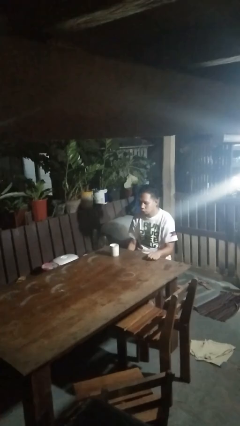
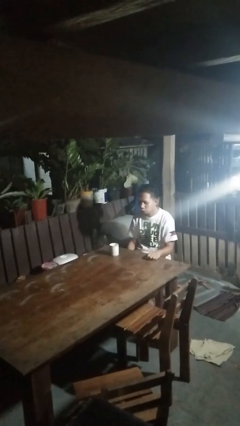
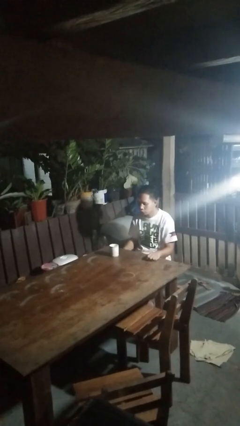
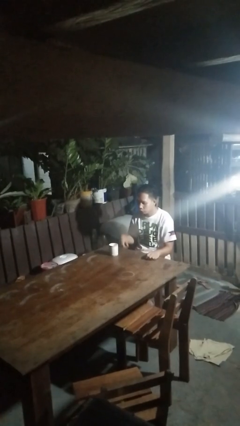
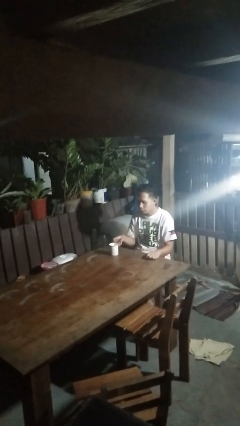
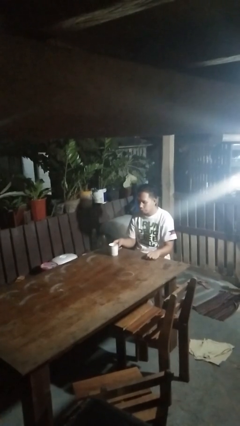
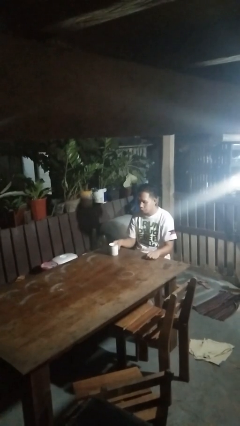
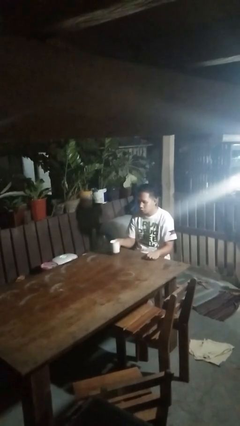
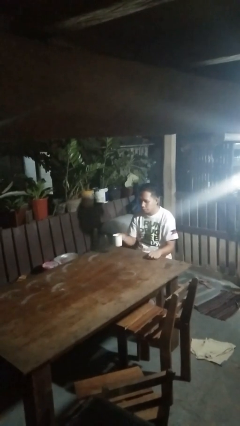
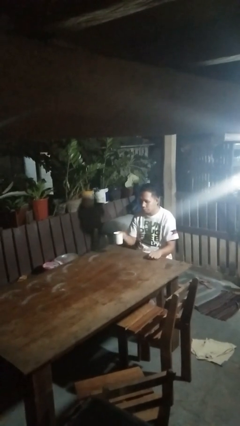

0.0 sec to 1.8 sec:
person picks up object from table

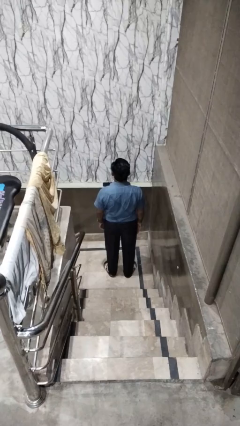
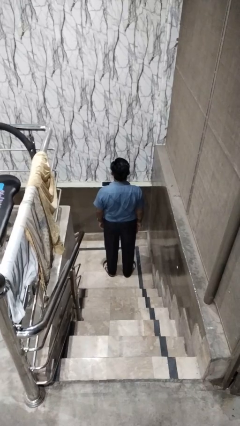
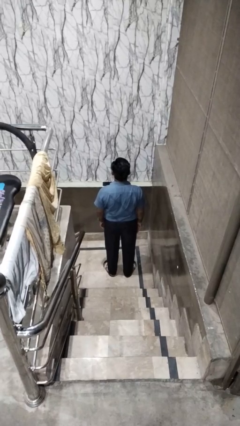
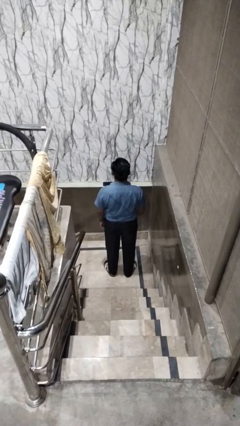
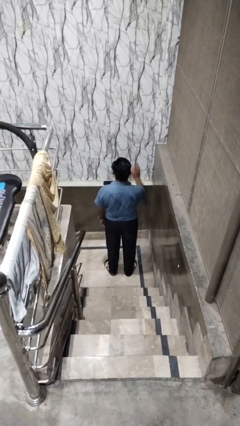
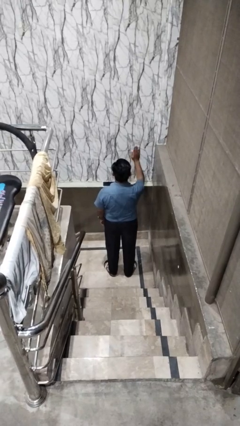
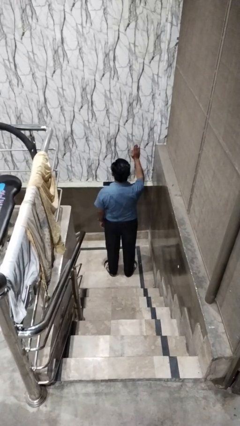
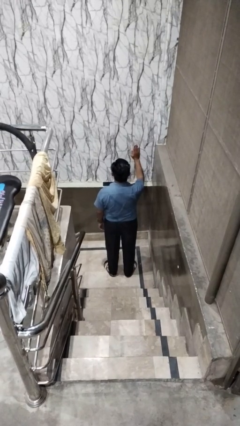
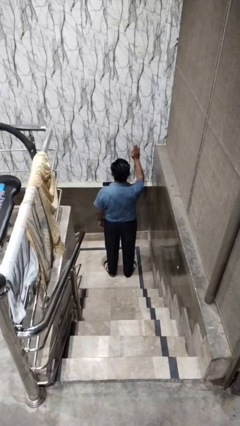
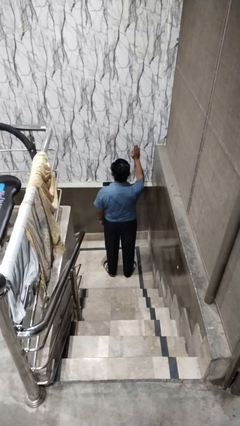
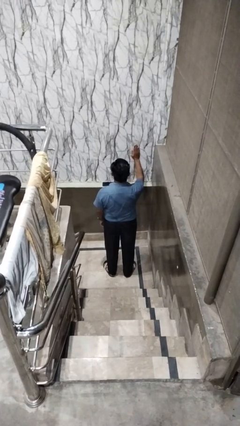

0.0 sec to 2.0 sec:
person gestures stop

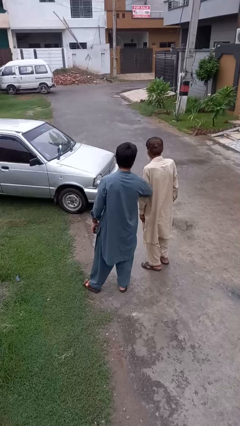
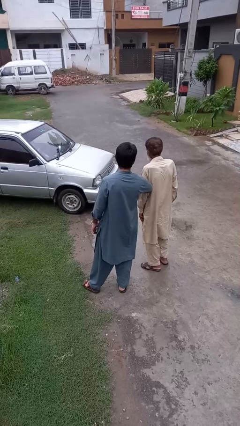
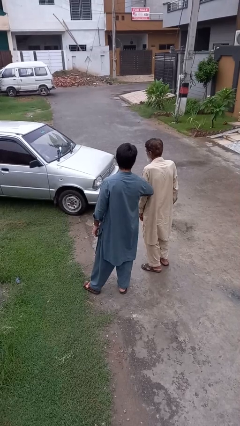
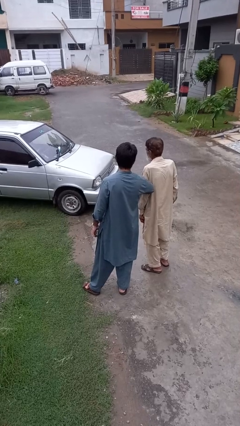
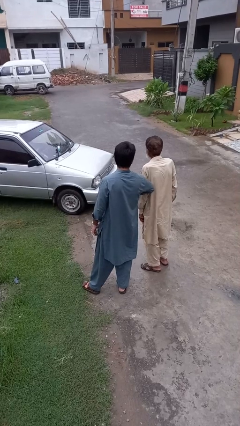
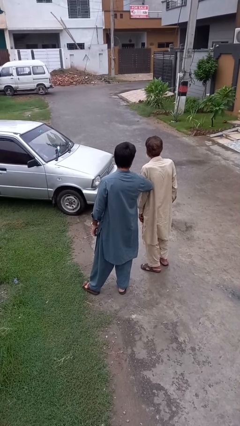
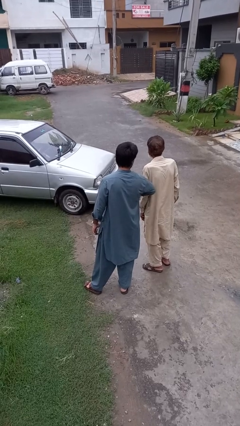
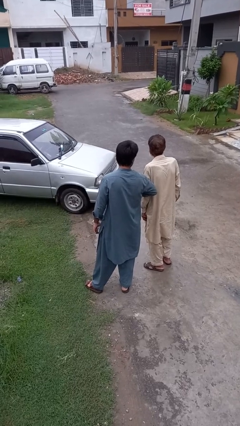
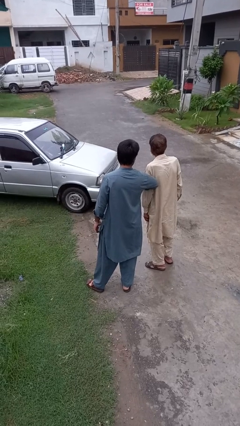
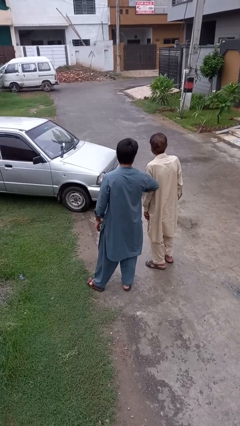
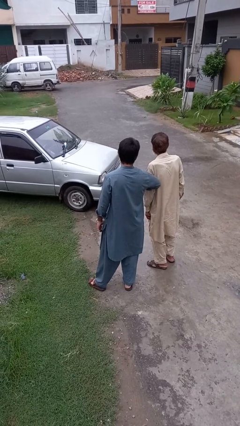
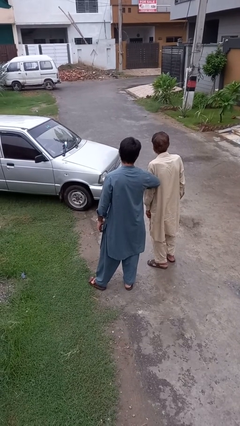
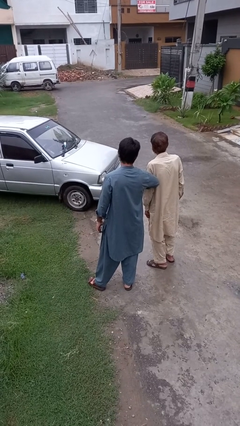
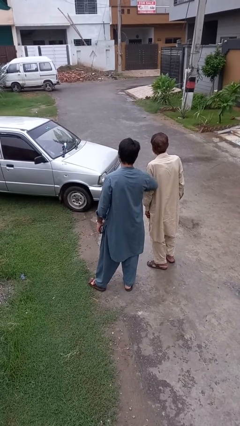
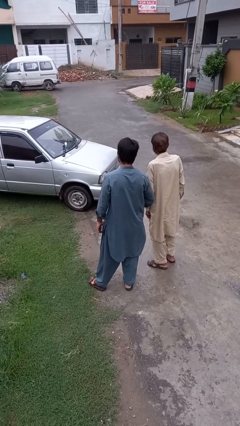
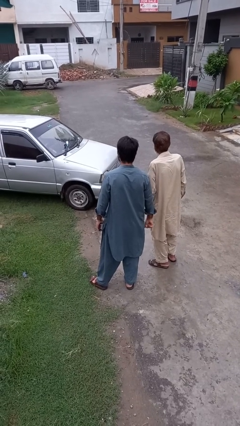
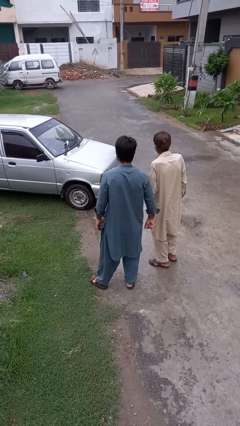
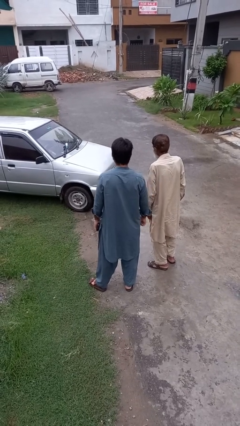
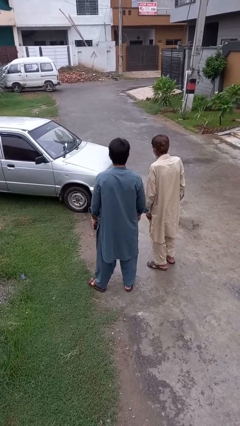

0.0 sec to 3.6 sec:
person nudges person with elbow

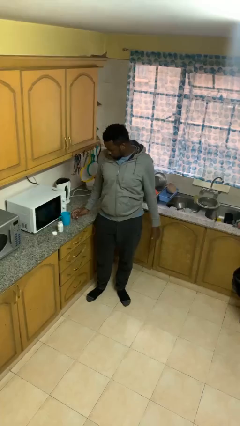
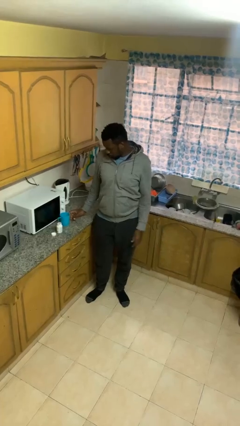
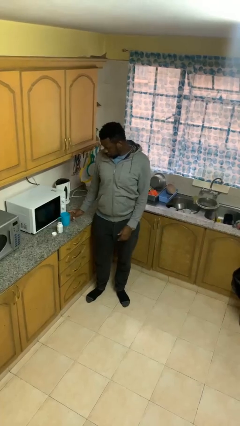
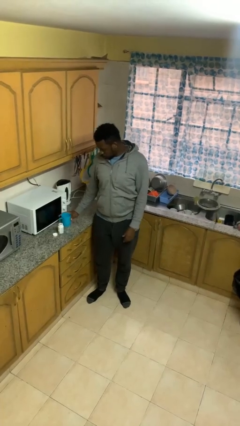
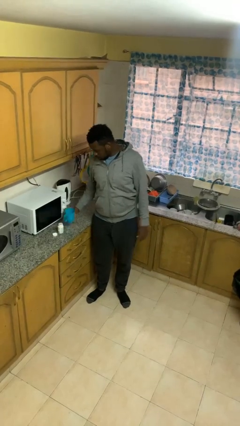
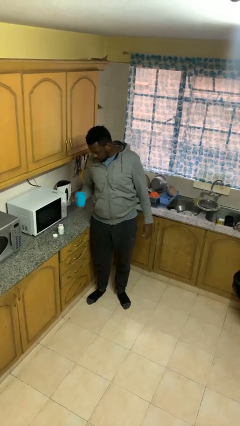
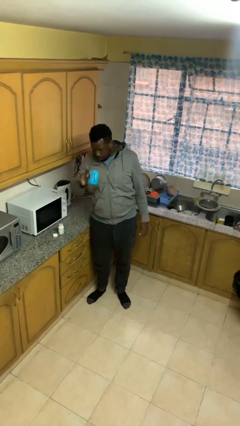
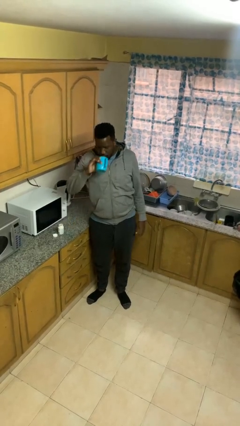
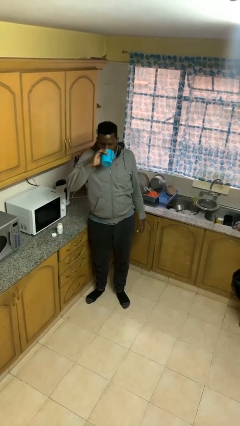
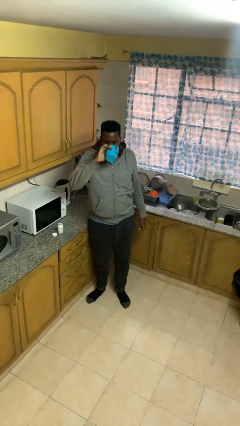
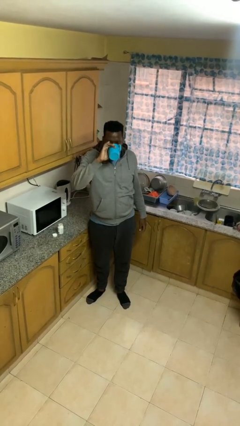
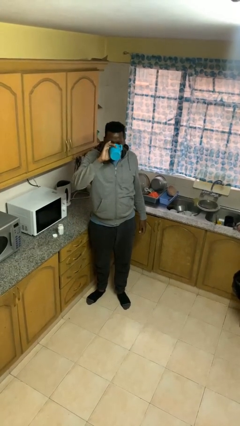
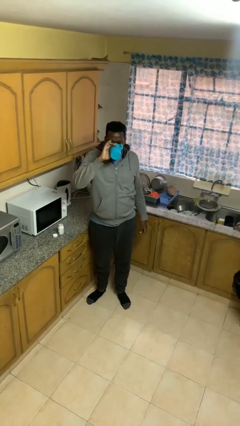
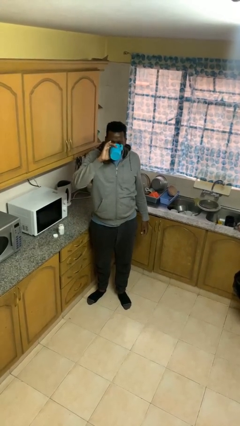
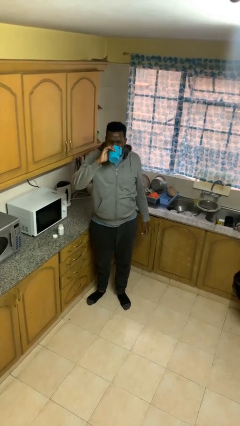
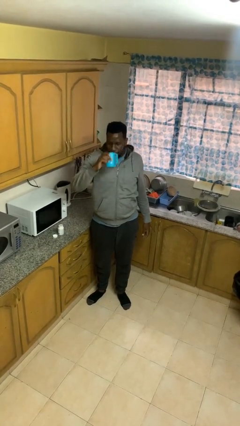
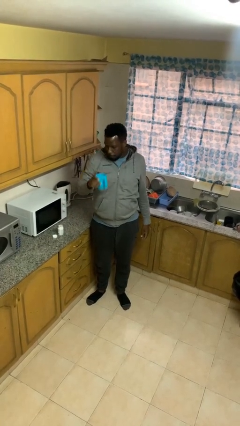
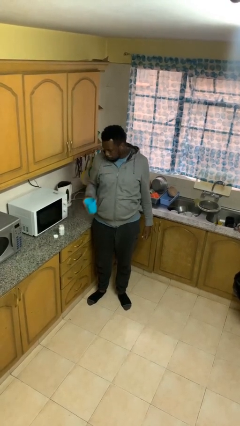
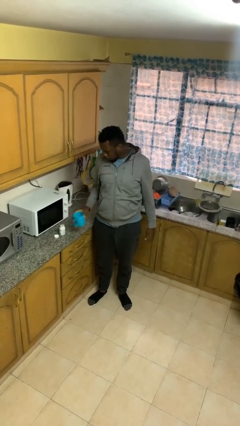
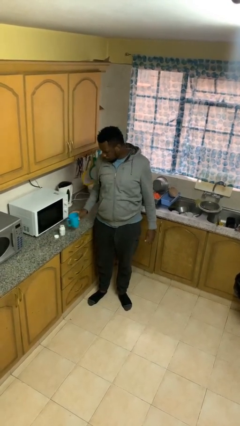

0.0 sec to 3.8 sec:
person drinks from cup

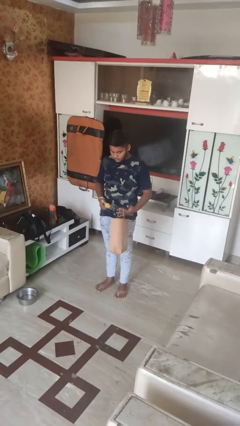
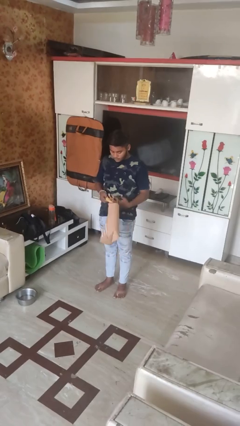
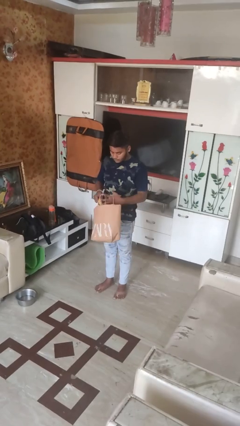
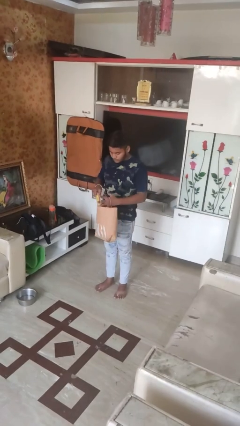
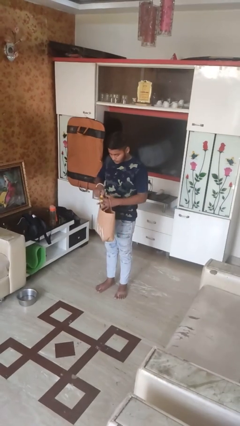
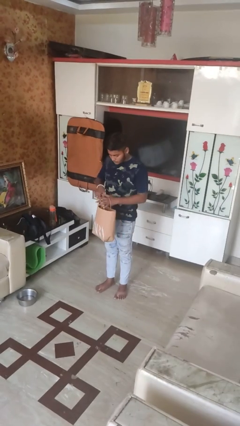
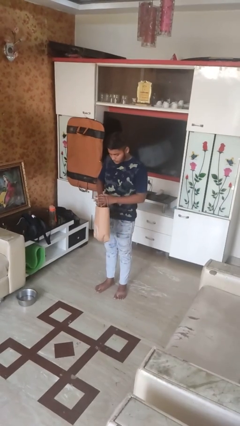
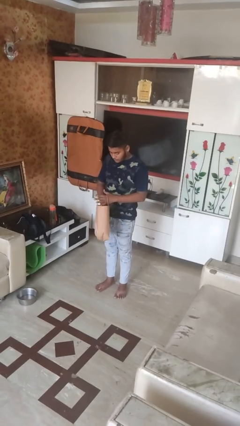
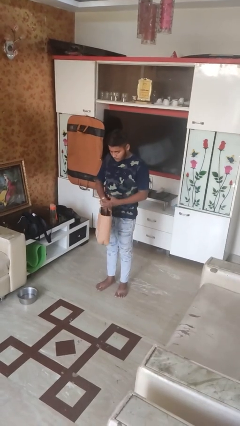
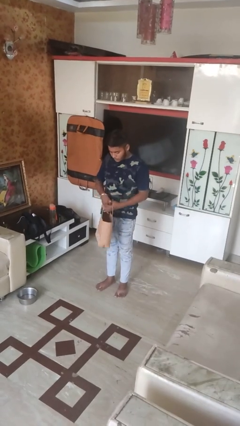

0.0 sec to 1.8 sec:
person puts object into bag

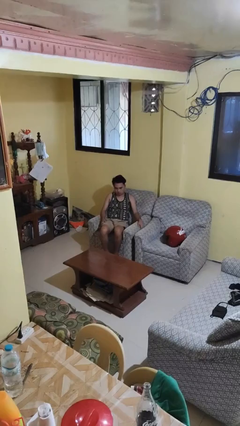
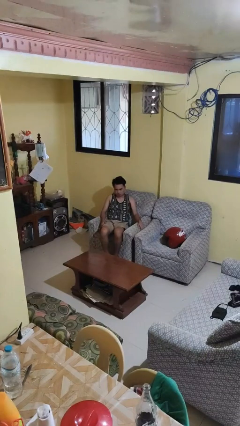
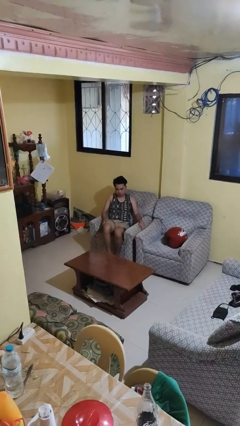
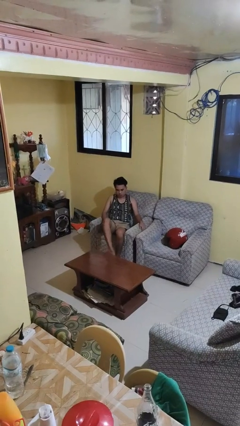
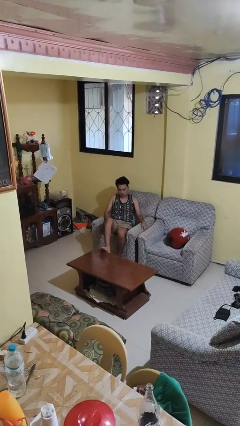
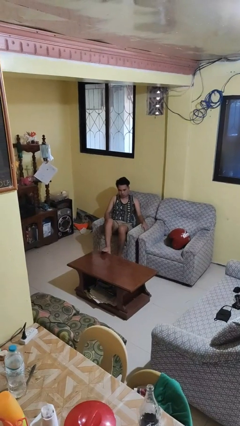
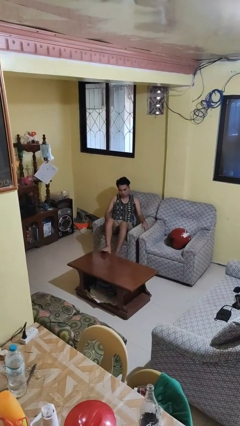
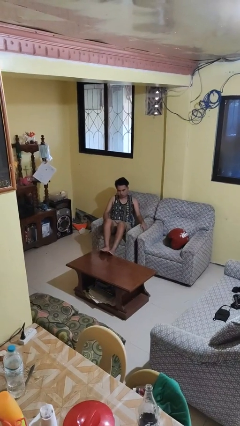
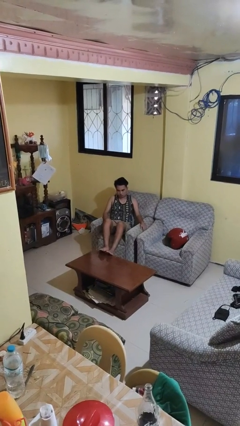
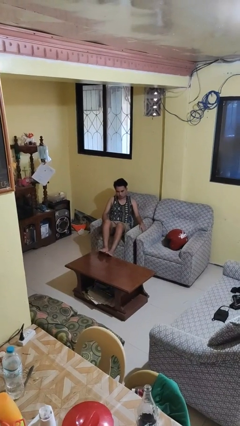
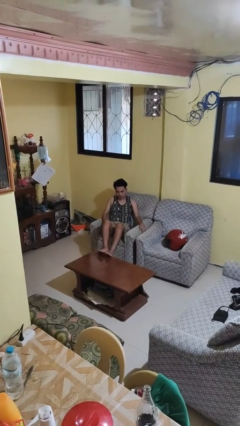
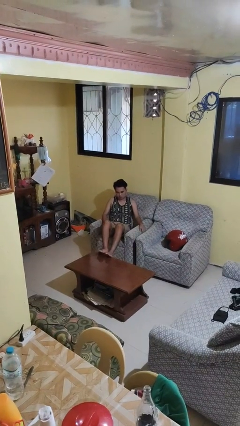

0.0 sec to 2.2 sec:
person puts feet up

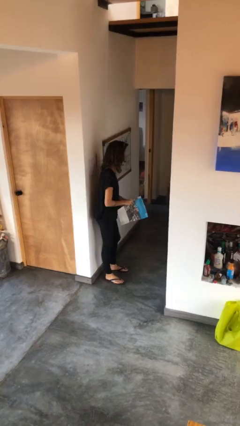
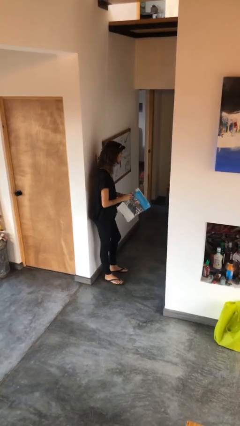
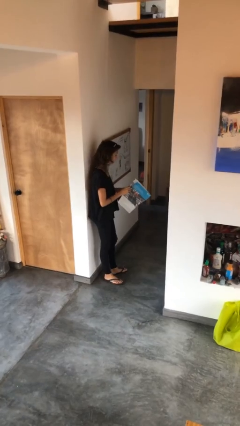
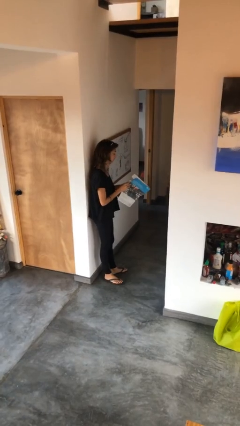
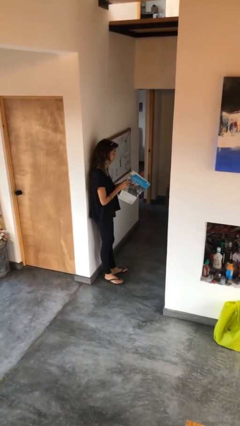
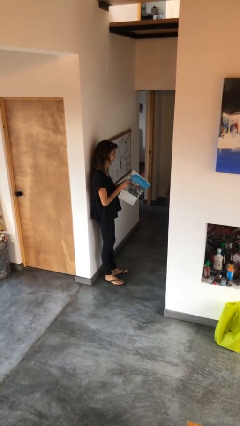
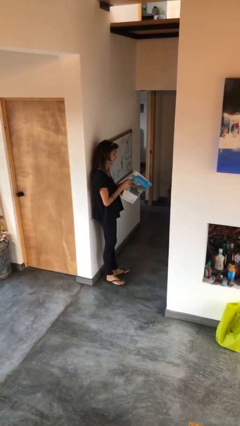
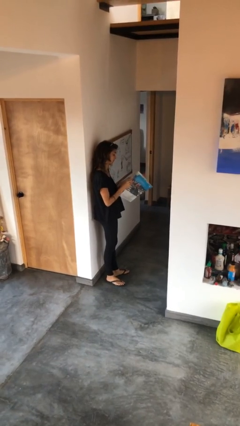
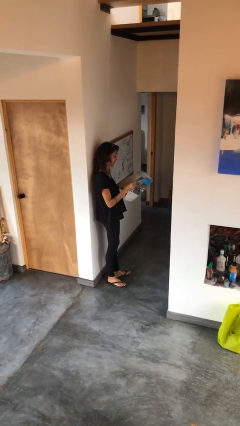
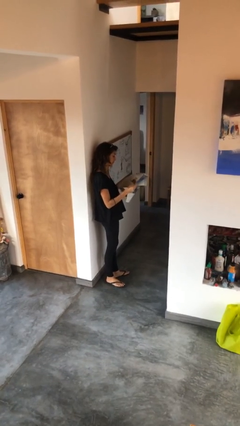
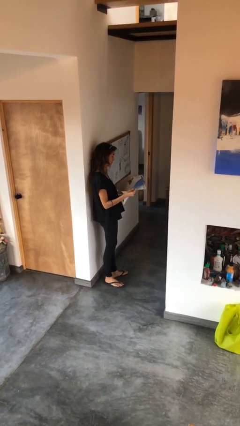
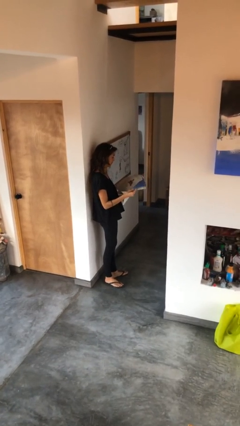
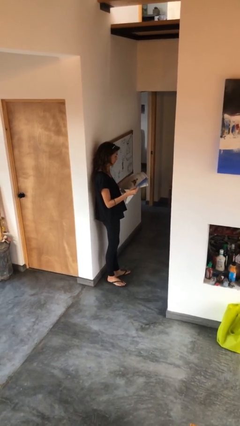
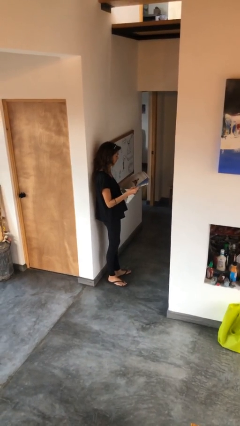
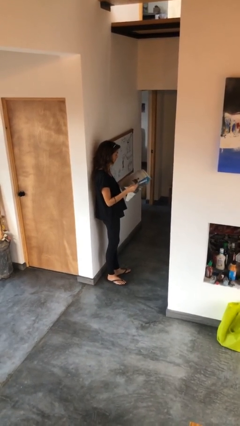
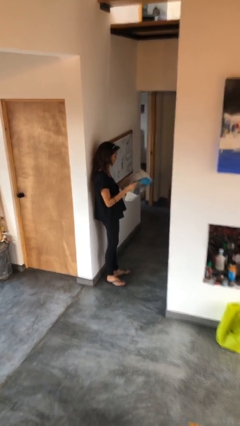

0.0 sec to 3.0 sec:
person reads newspaper
